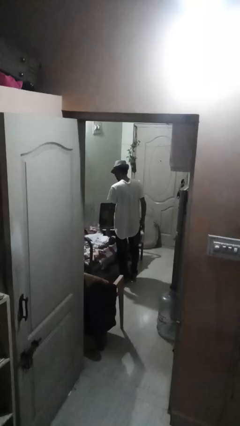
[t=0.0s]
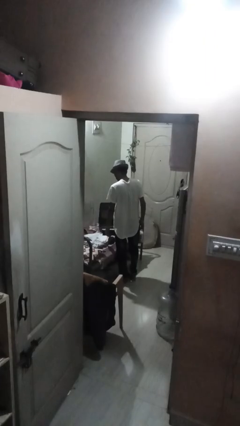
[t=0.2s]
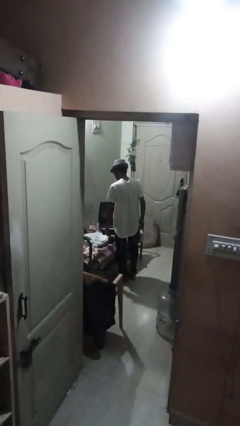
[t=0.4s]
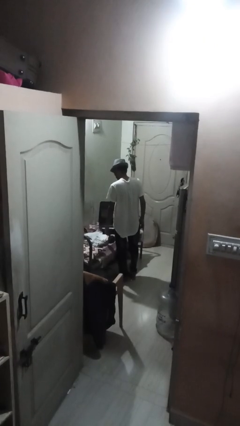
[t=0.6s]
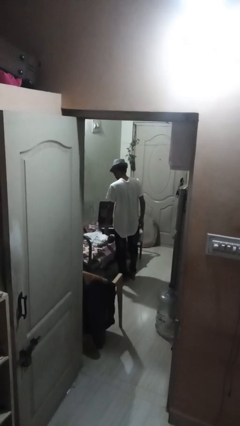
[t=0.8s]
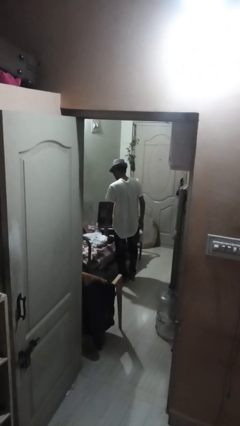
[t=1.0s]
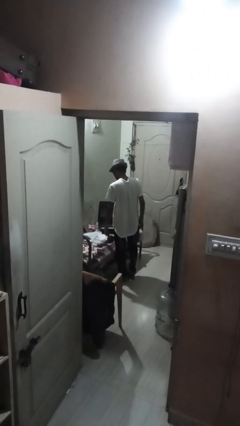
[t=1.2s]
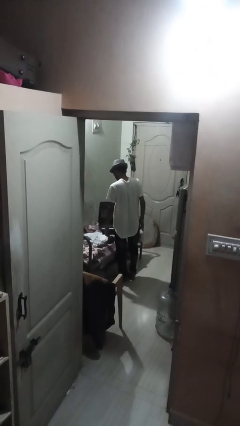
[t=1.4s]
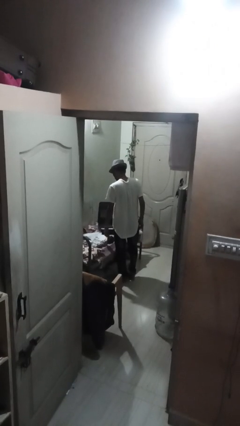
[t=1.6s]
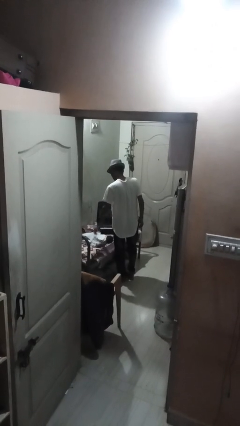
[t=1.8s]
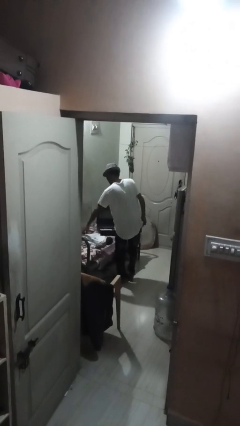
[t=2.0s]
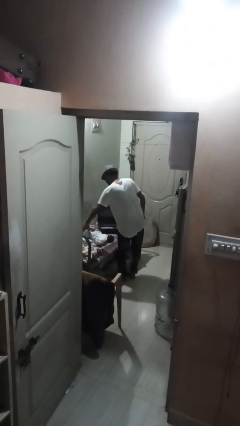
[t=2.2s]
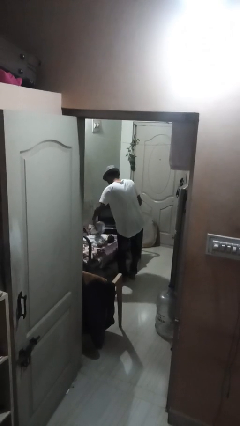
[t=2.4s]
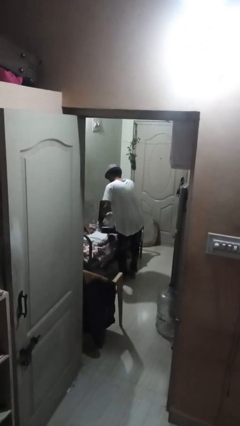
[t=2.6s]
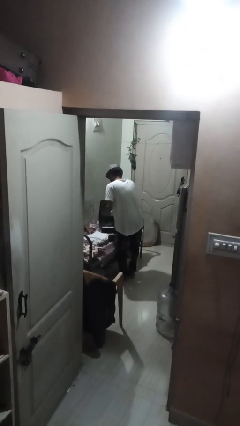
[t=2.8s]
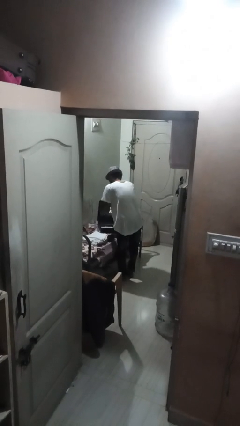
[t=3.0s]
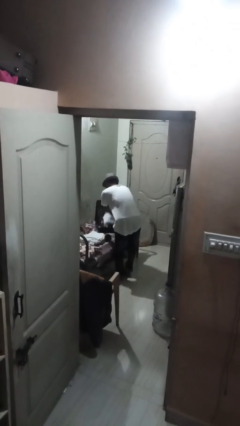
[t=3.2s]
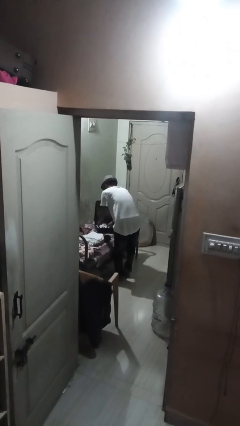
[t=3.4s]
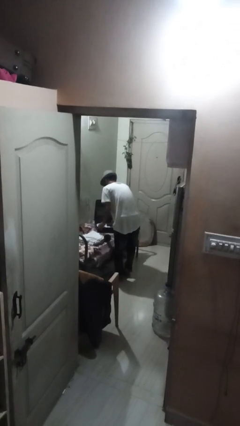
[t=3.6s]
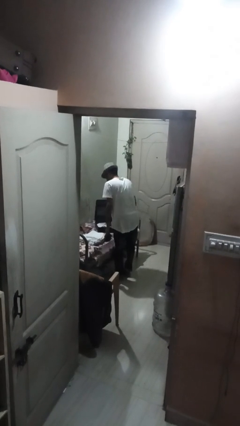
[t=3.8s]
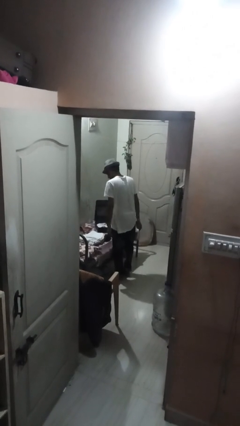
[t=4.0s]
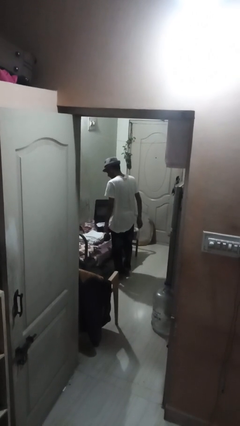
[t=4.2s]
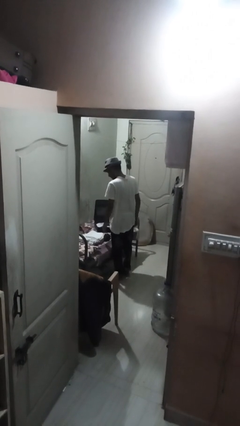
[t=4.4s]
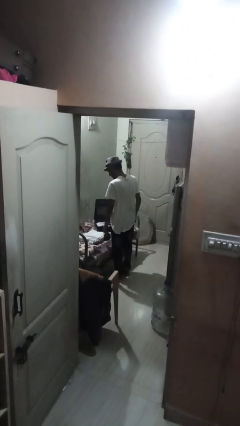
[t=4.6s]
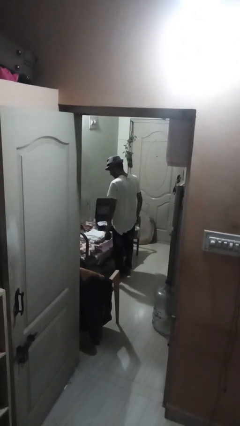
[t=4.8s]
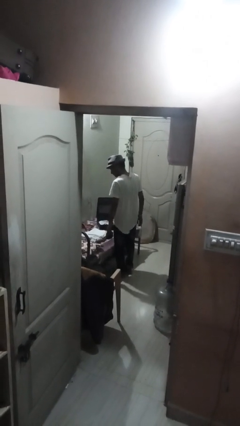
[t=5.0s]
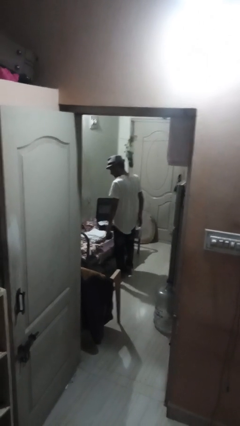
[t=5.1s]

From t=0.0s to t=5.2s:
person loads clothes into suitcase

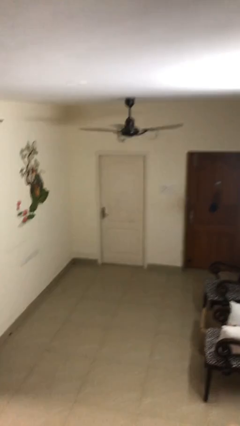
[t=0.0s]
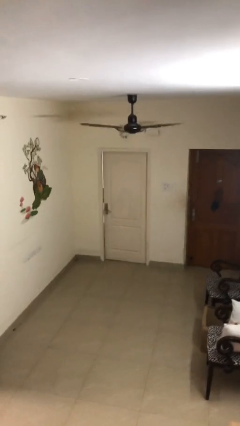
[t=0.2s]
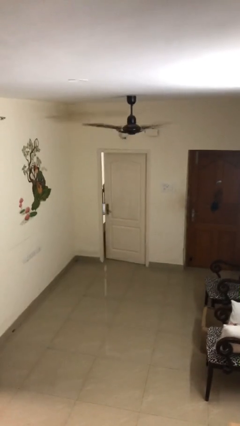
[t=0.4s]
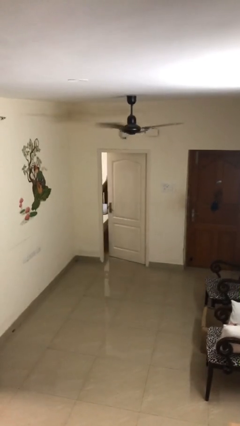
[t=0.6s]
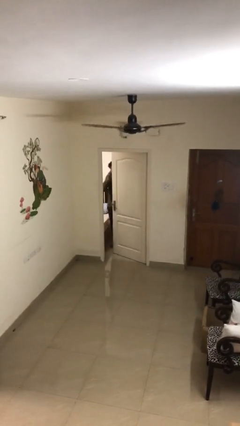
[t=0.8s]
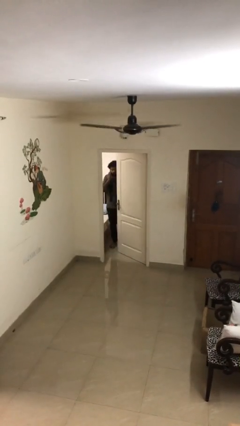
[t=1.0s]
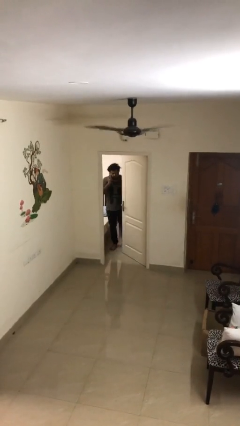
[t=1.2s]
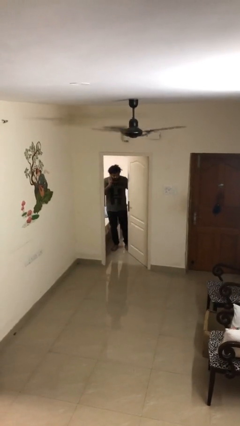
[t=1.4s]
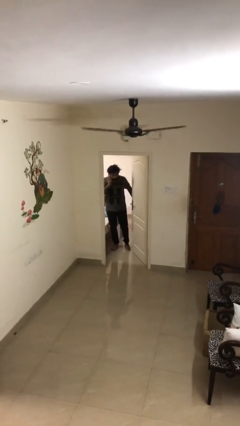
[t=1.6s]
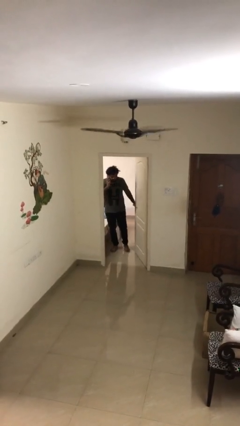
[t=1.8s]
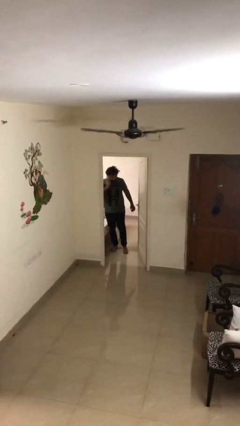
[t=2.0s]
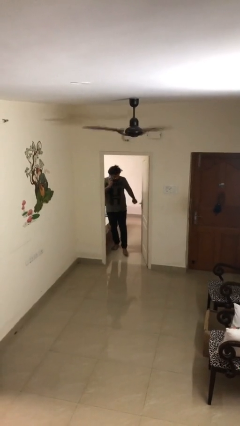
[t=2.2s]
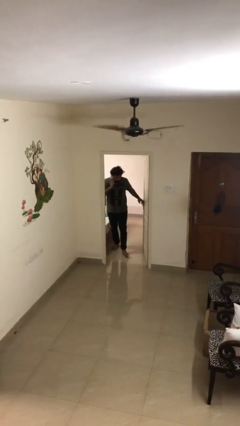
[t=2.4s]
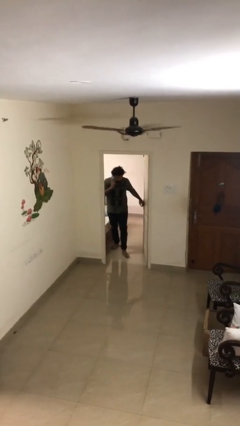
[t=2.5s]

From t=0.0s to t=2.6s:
person opens facility door

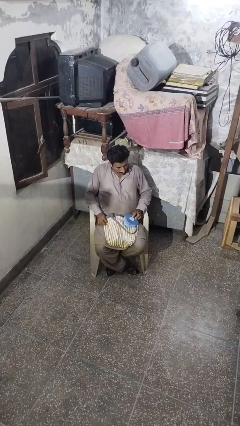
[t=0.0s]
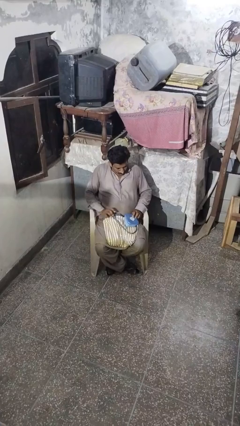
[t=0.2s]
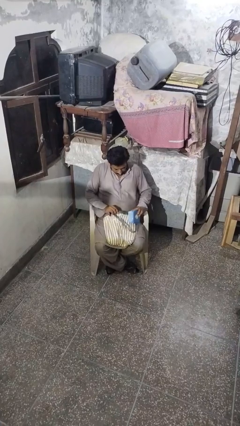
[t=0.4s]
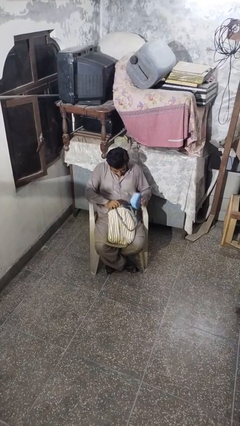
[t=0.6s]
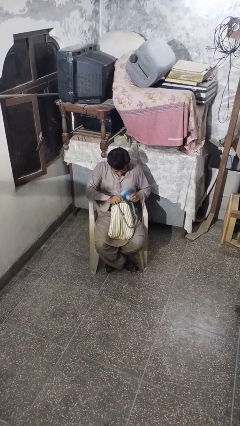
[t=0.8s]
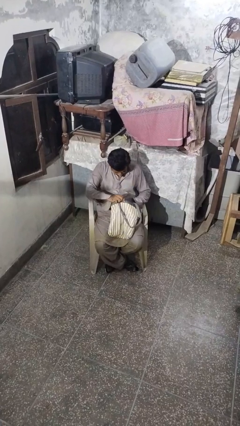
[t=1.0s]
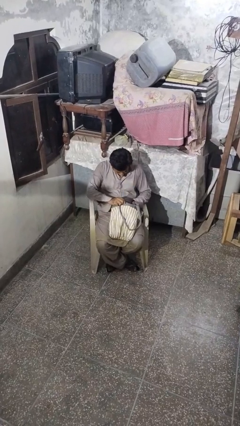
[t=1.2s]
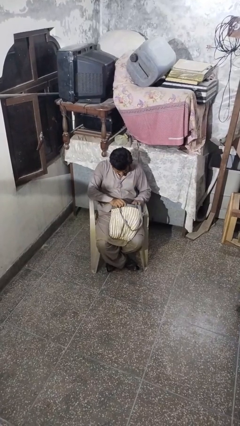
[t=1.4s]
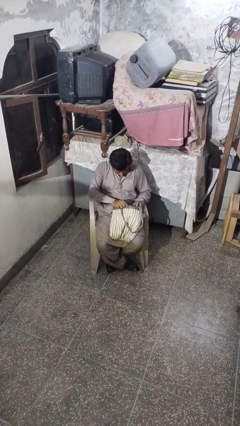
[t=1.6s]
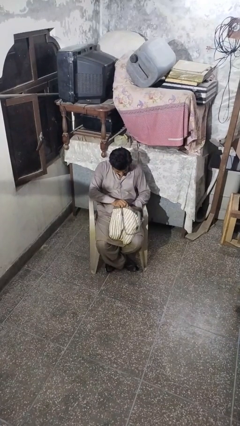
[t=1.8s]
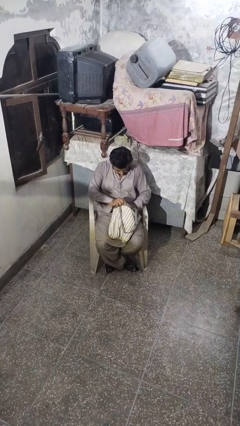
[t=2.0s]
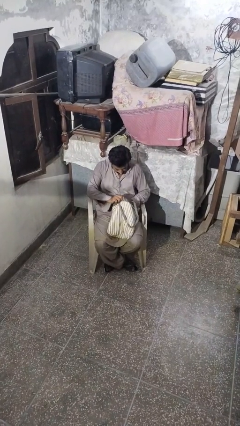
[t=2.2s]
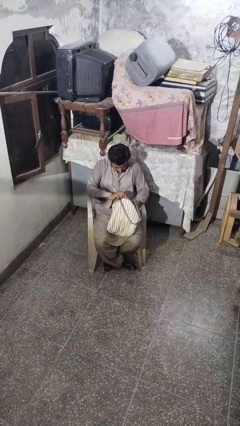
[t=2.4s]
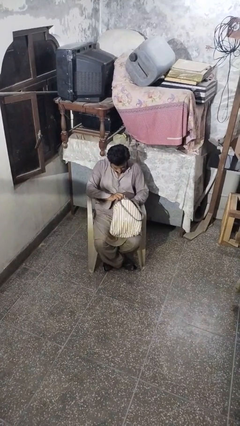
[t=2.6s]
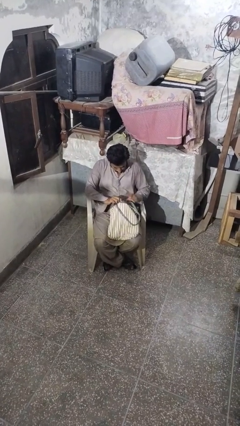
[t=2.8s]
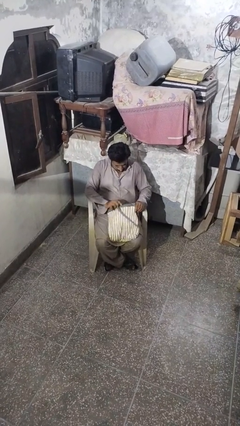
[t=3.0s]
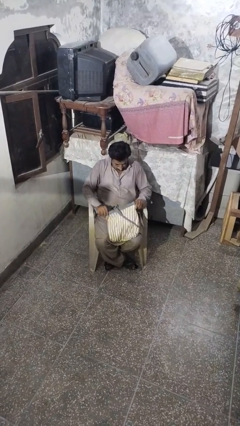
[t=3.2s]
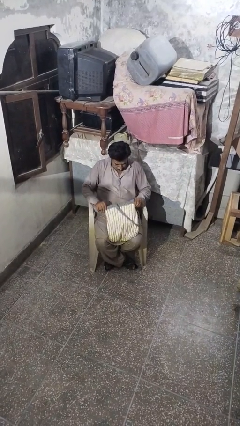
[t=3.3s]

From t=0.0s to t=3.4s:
person puts object into backpack

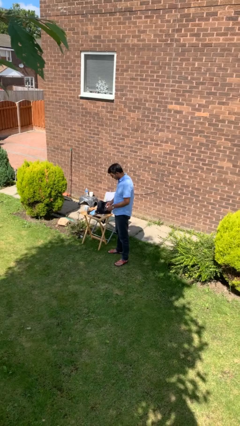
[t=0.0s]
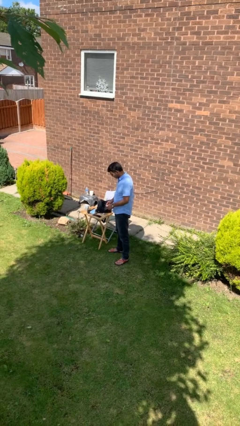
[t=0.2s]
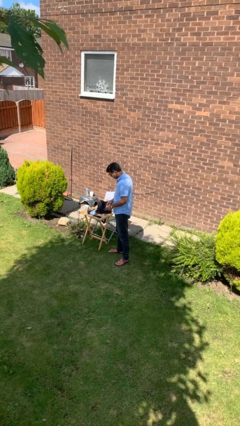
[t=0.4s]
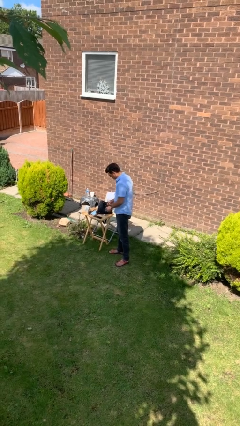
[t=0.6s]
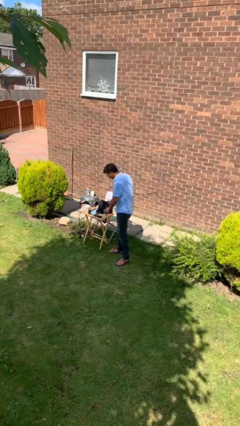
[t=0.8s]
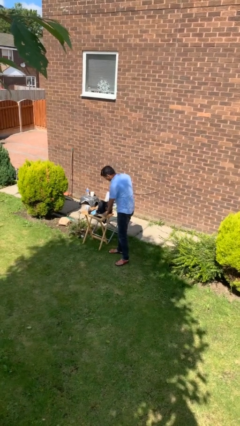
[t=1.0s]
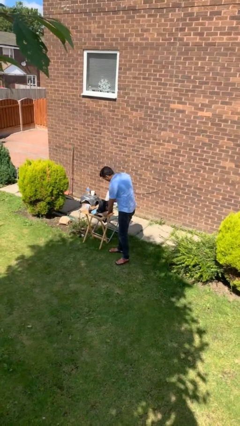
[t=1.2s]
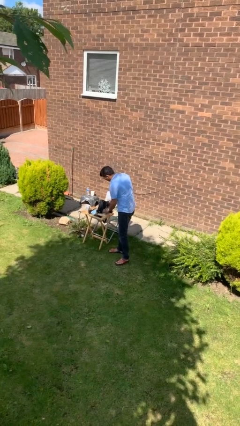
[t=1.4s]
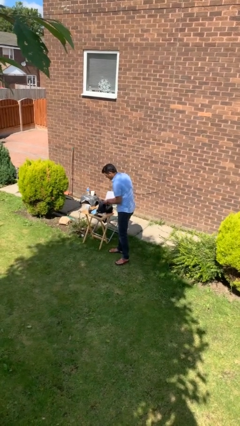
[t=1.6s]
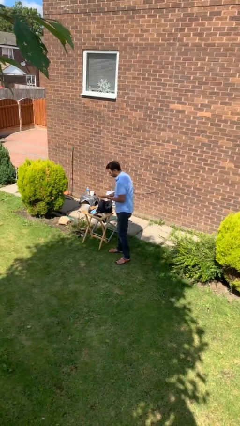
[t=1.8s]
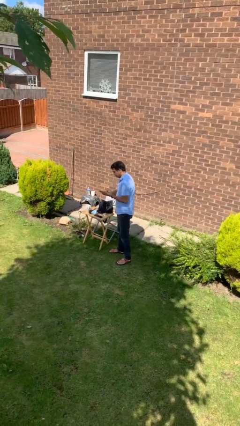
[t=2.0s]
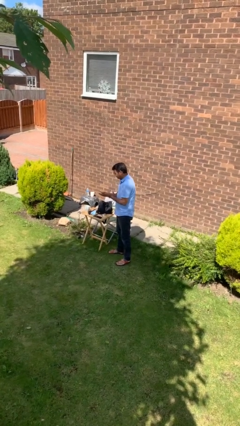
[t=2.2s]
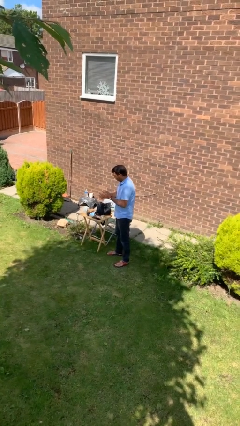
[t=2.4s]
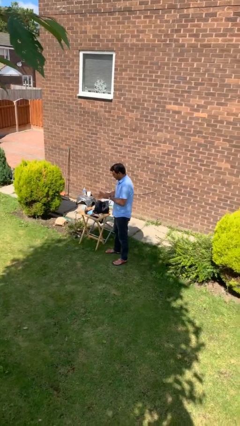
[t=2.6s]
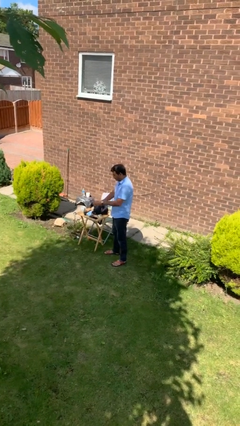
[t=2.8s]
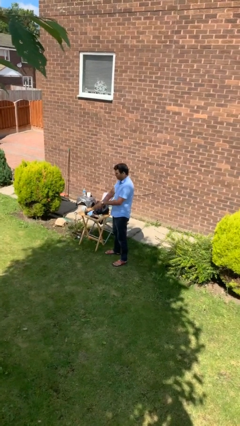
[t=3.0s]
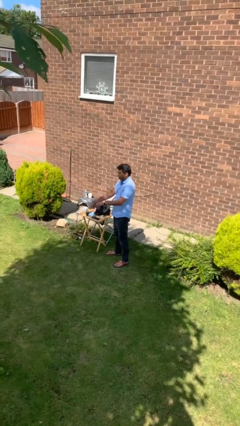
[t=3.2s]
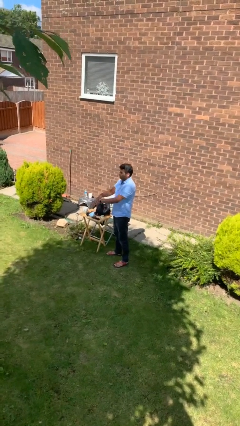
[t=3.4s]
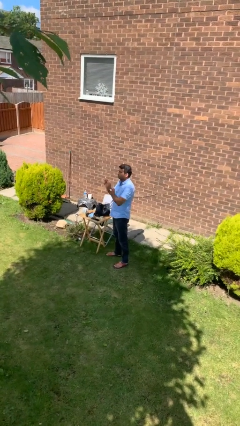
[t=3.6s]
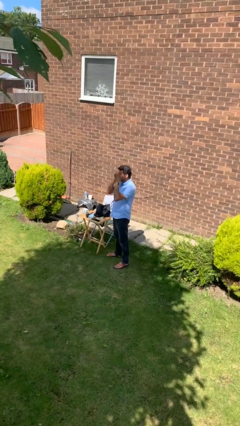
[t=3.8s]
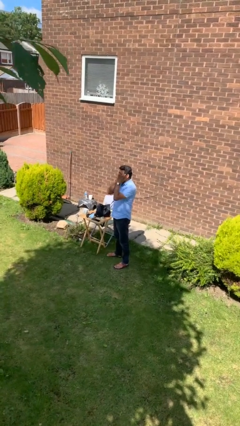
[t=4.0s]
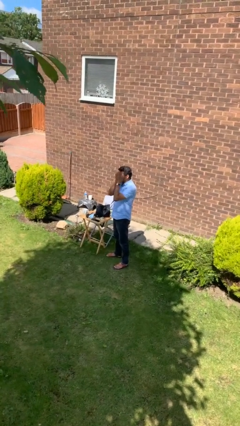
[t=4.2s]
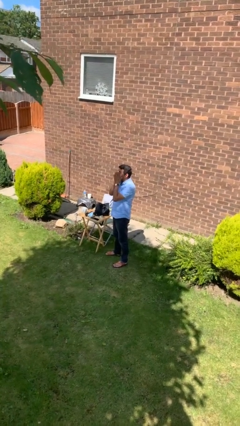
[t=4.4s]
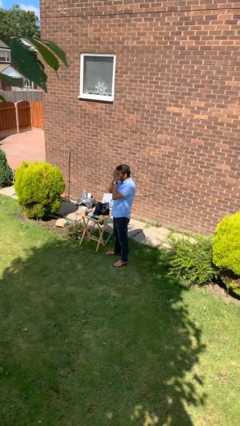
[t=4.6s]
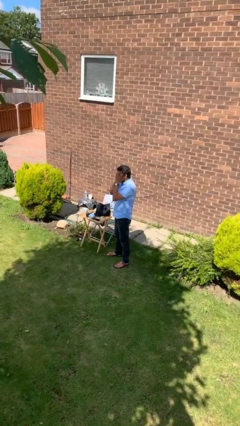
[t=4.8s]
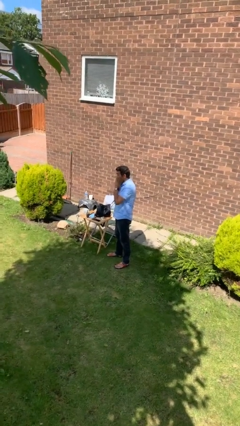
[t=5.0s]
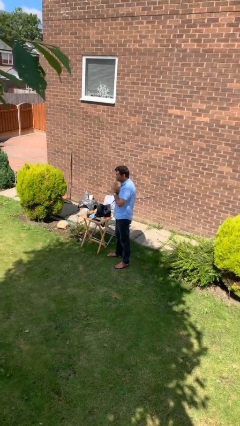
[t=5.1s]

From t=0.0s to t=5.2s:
person applies facial moisturizer

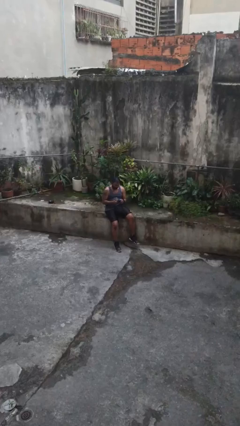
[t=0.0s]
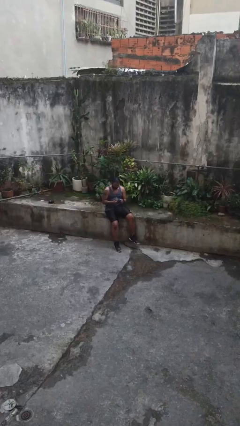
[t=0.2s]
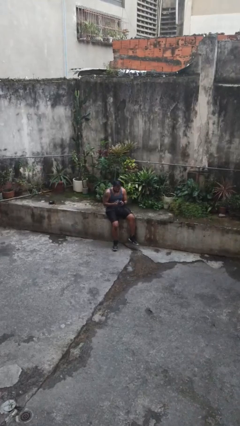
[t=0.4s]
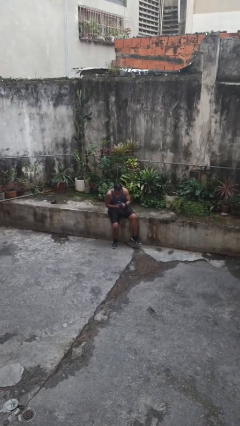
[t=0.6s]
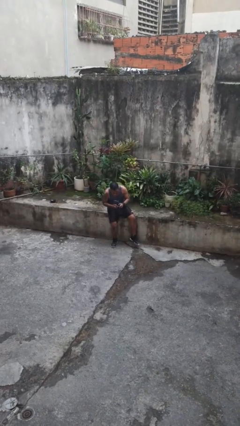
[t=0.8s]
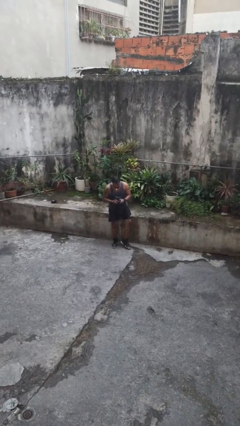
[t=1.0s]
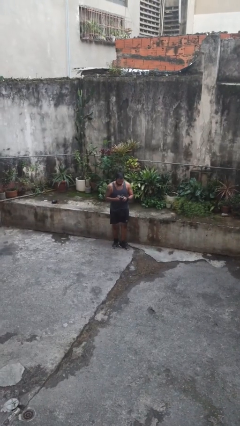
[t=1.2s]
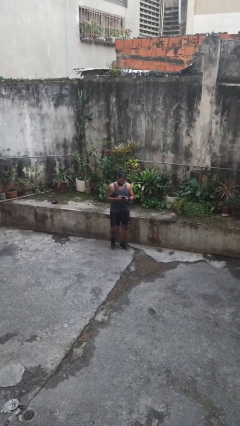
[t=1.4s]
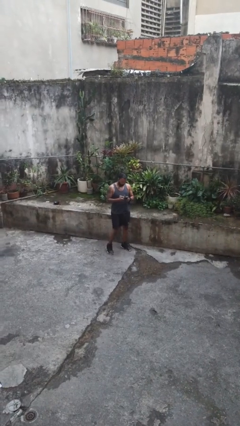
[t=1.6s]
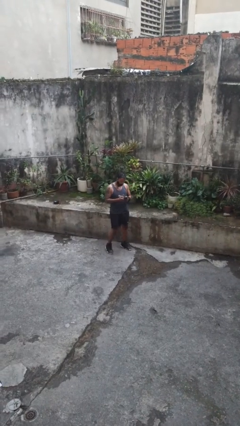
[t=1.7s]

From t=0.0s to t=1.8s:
person stands up
